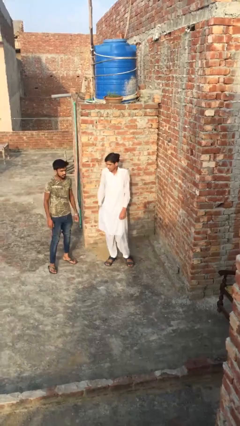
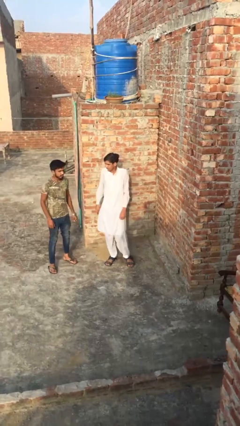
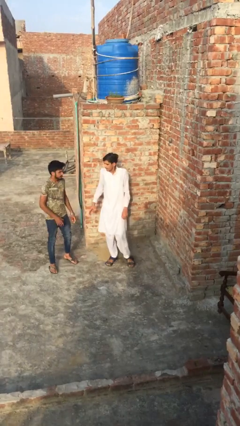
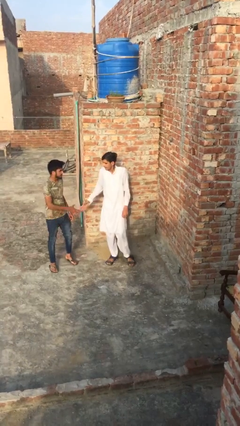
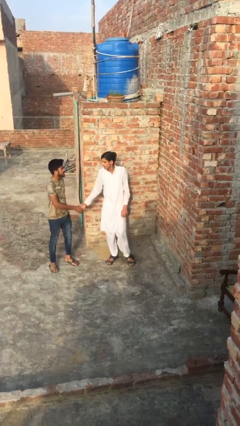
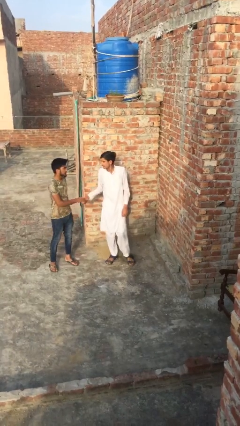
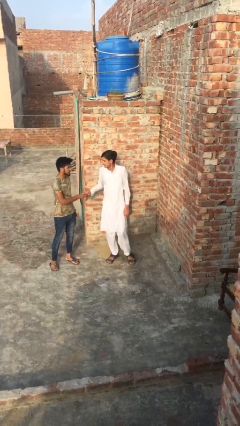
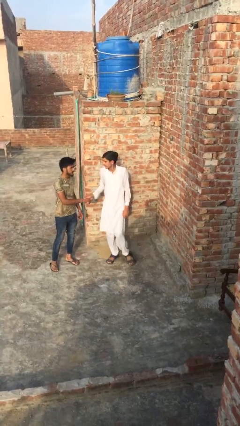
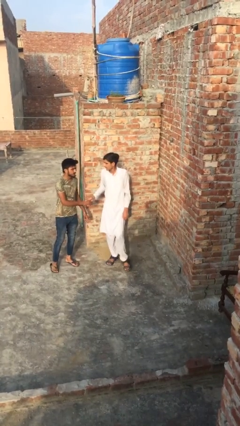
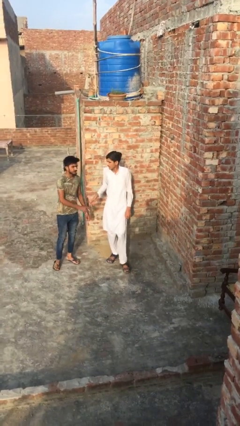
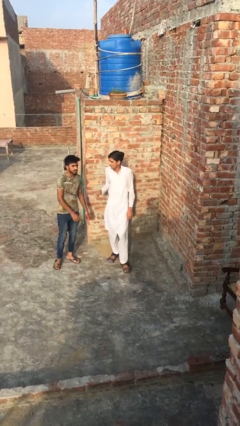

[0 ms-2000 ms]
person shakes hand

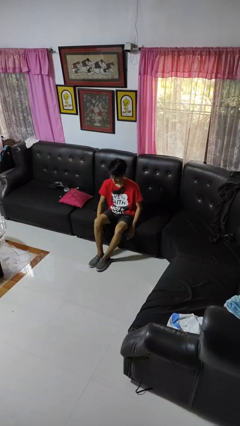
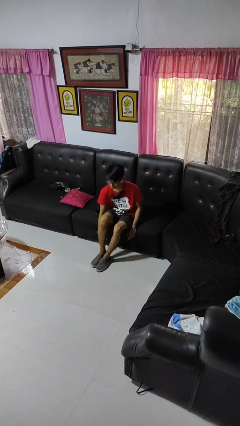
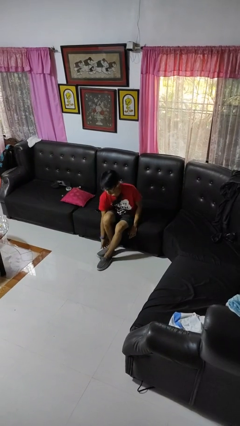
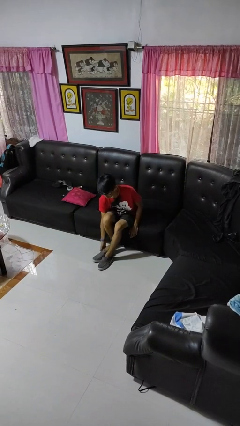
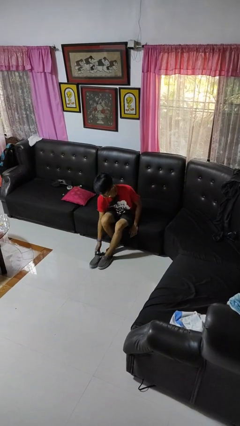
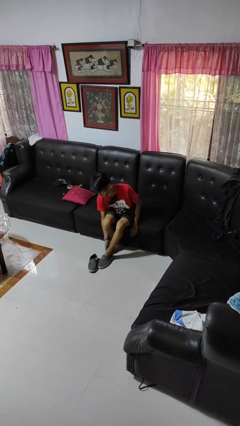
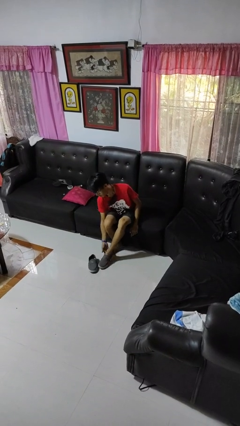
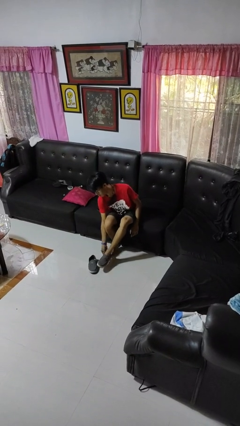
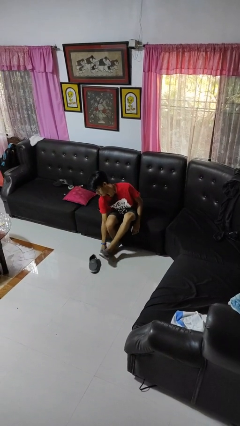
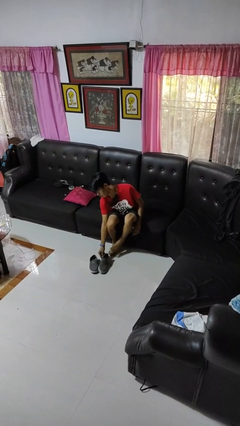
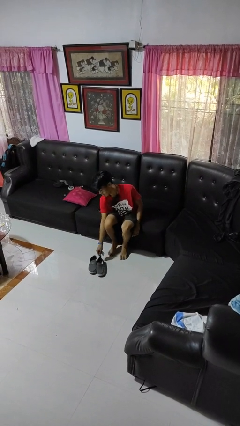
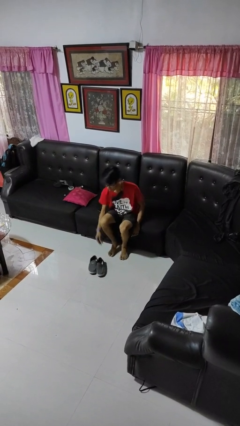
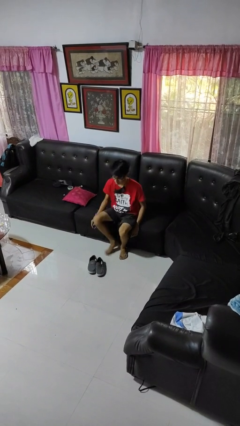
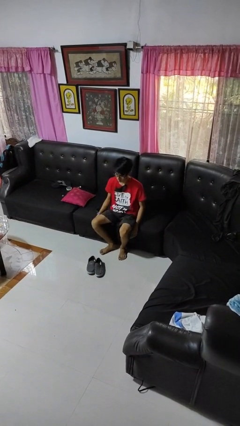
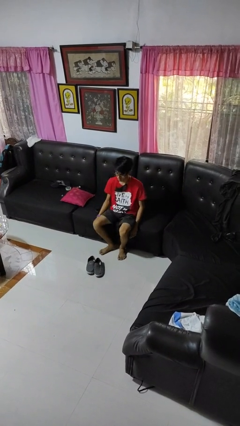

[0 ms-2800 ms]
person takes off shoes

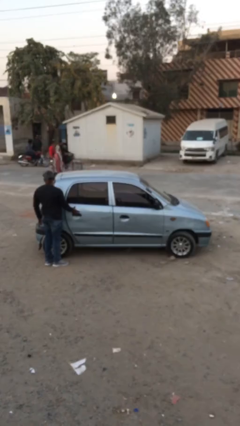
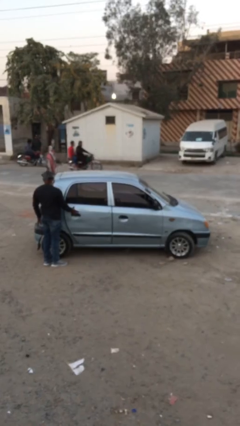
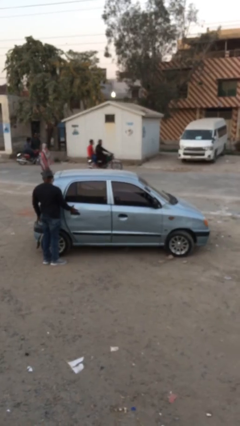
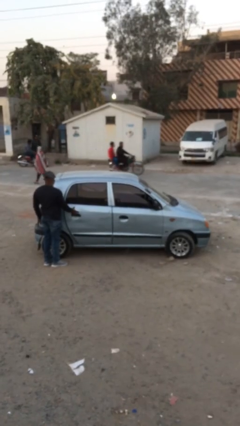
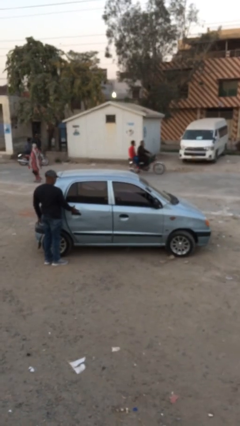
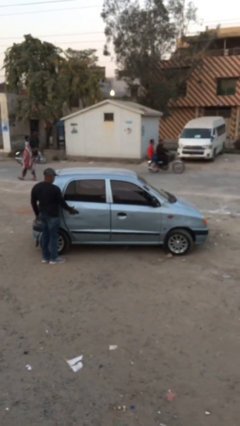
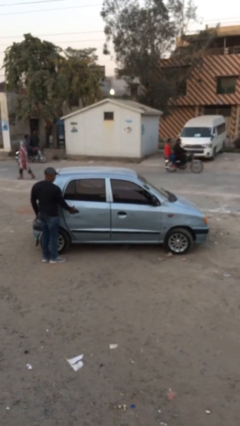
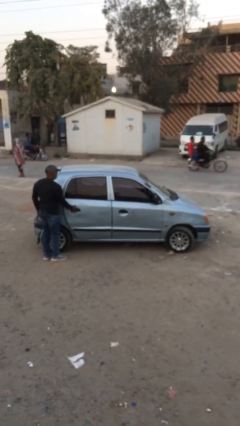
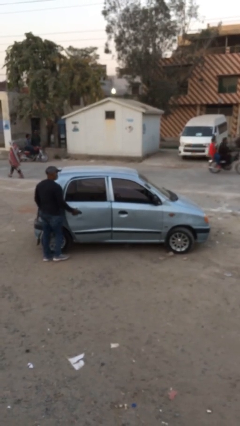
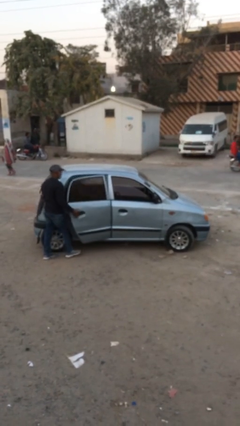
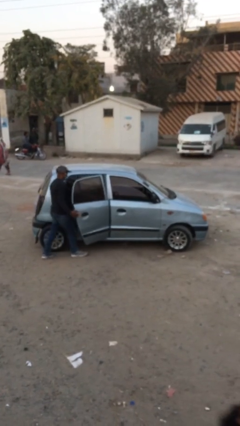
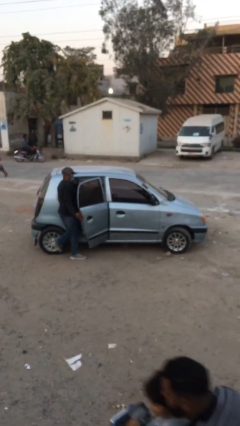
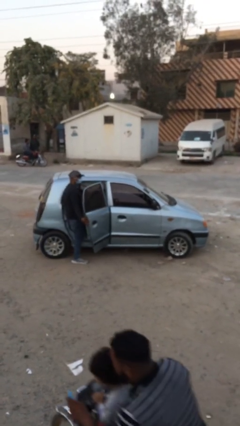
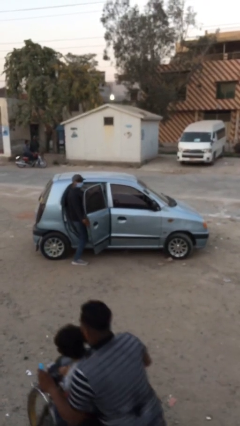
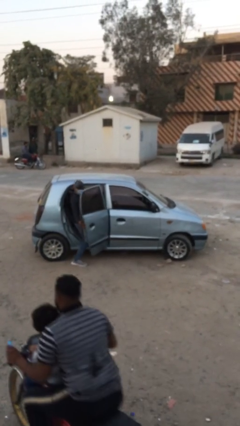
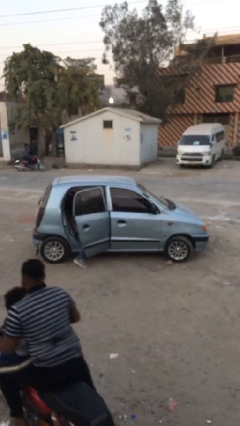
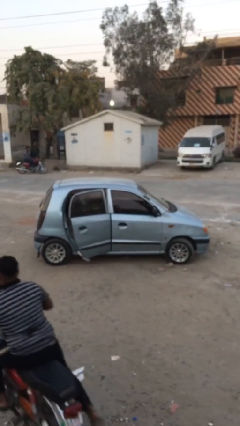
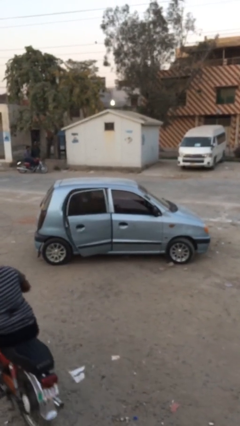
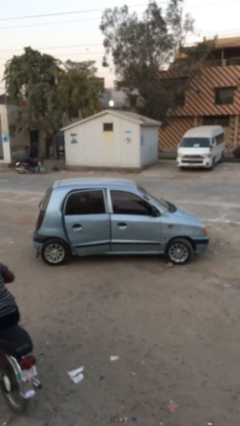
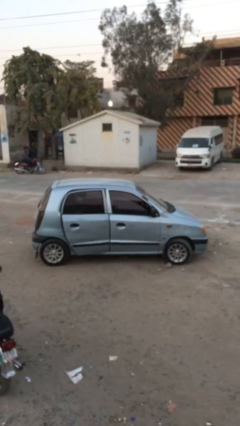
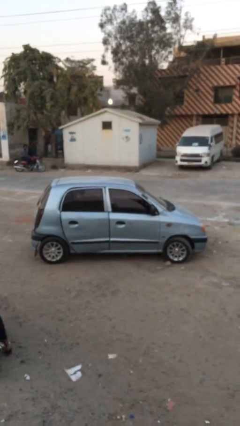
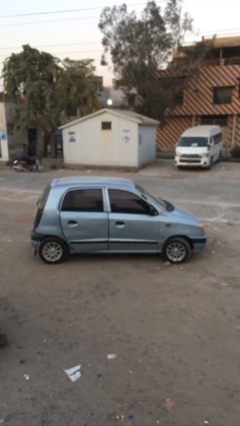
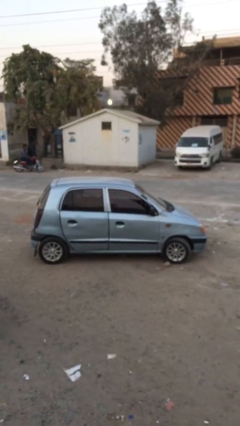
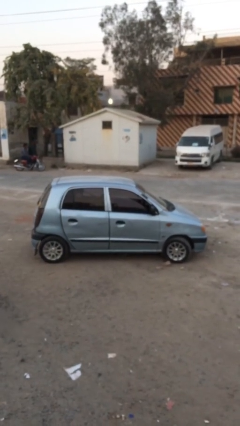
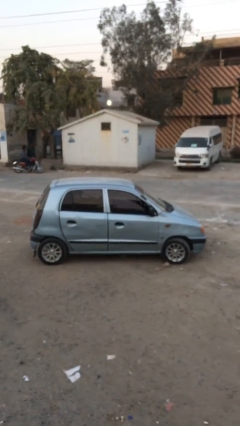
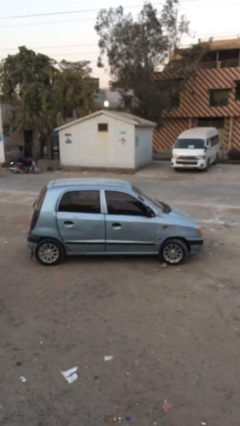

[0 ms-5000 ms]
car picks up person

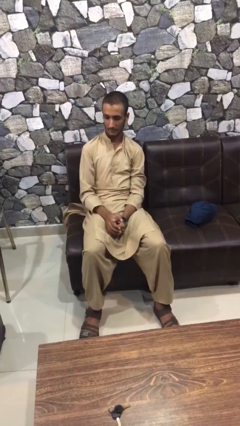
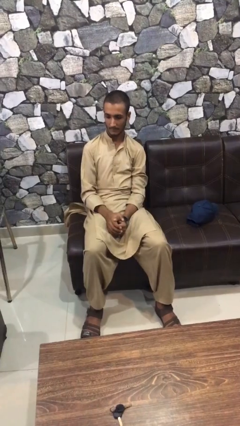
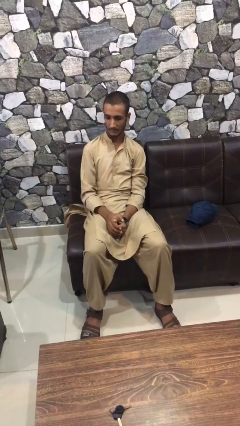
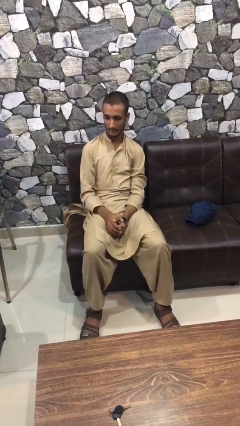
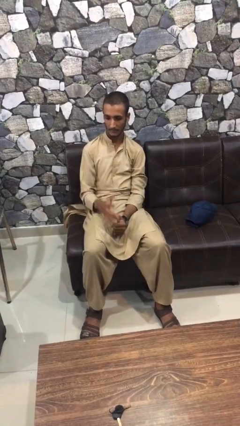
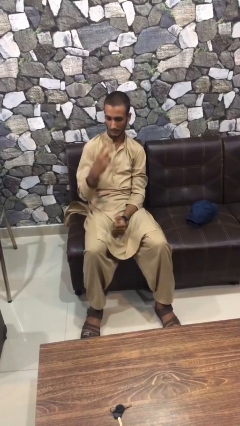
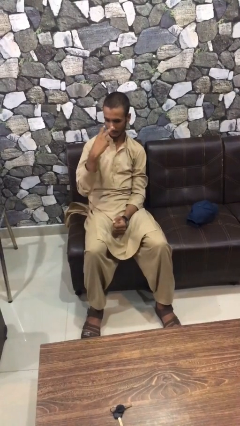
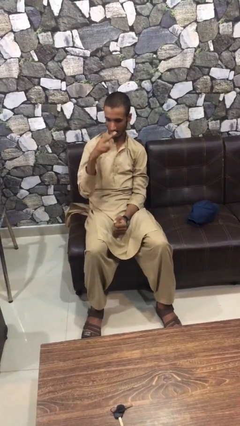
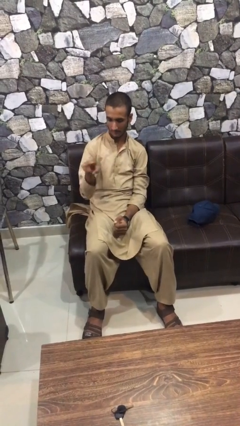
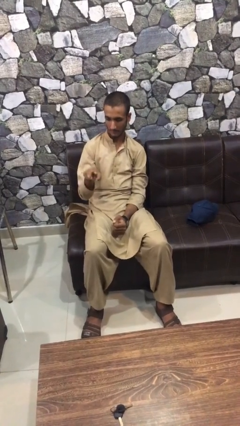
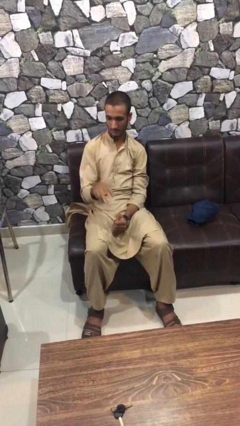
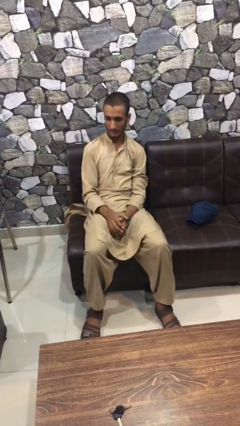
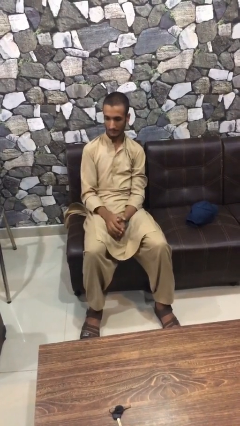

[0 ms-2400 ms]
person gestures watch closely

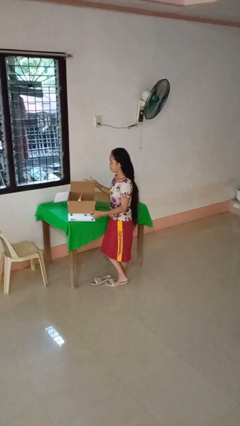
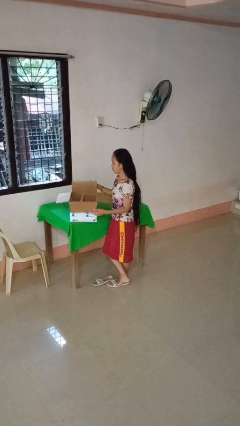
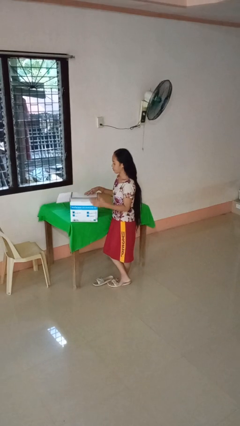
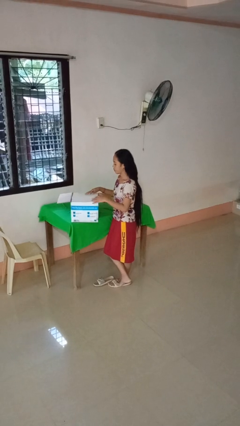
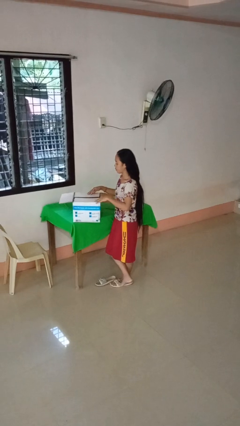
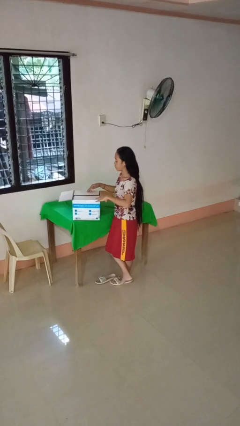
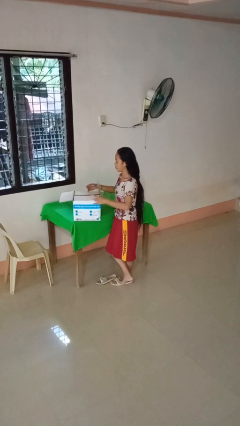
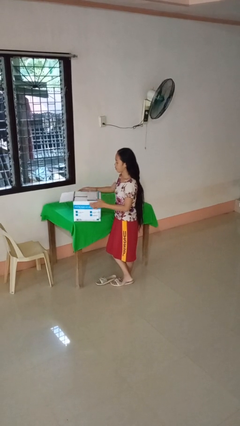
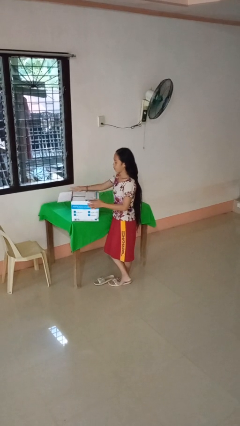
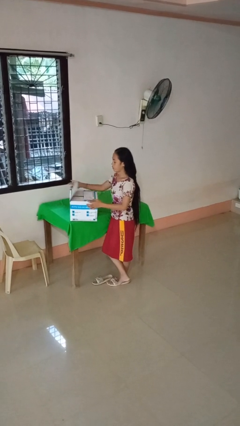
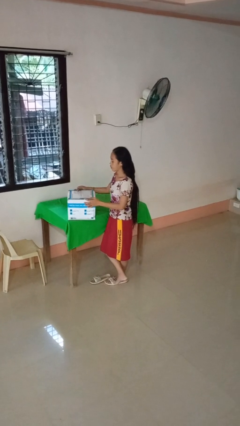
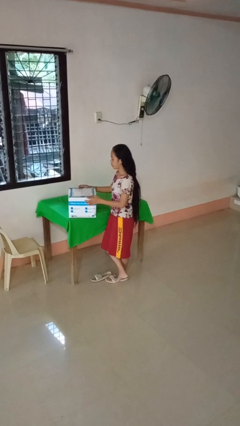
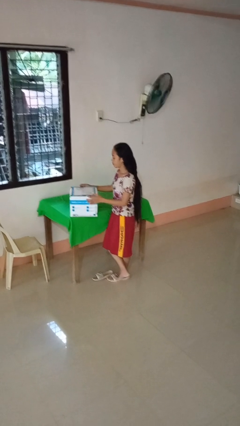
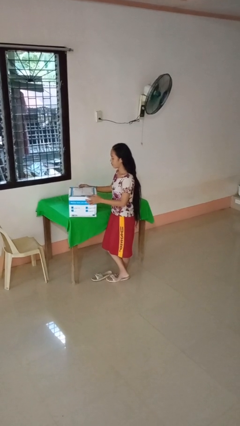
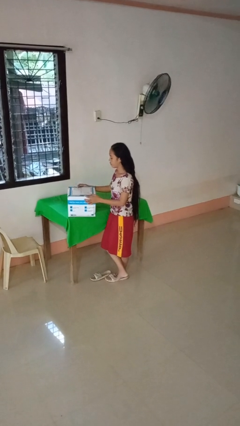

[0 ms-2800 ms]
person closes box

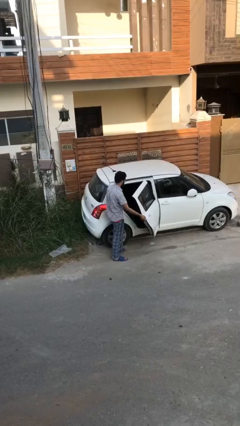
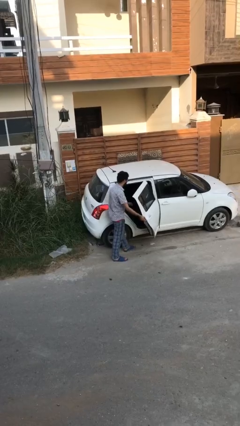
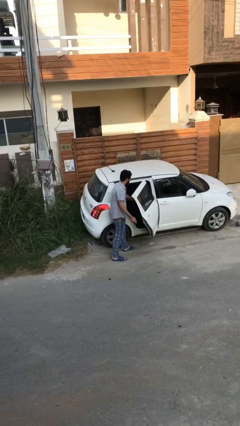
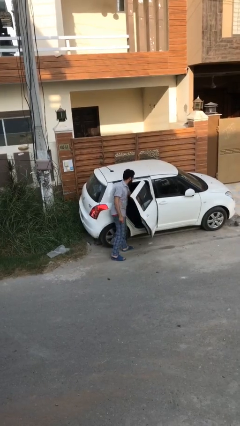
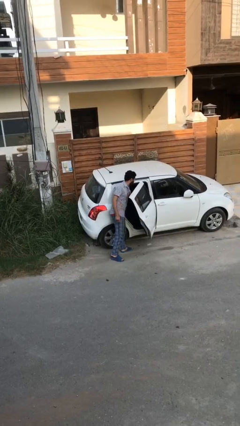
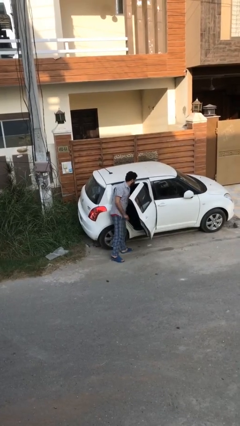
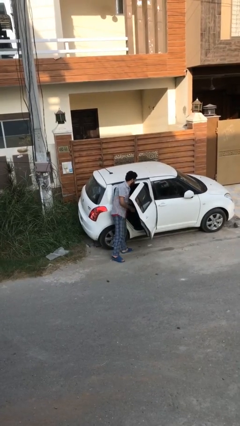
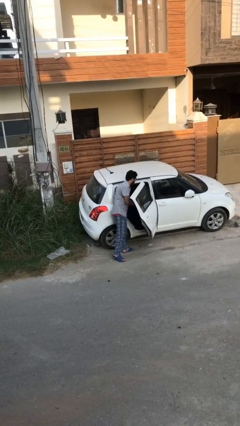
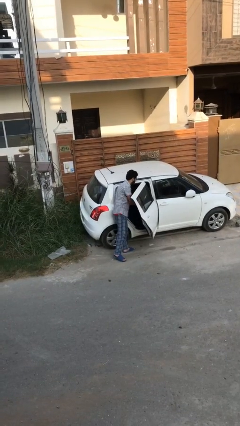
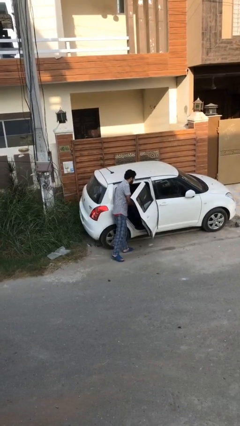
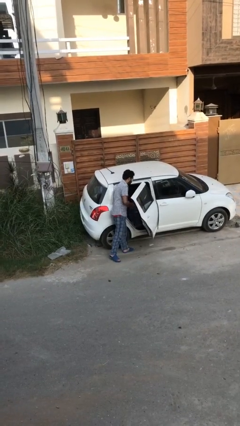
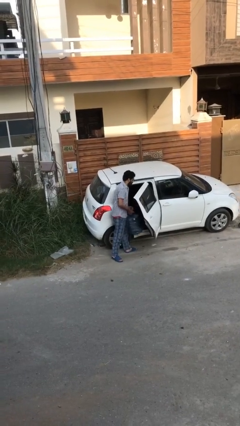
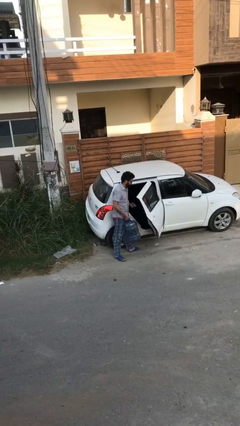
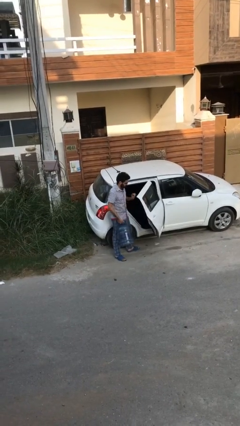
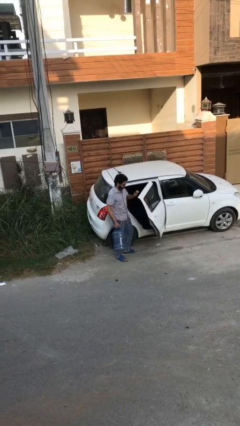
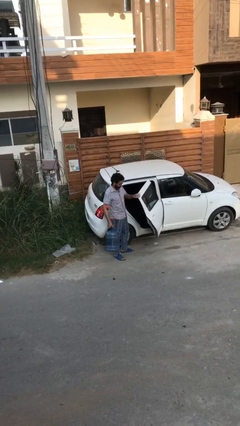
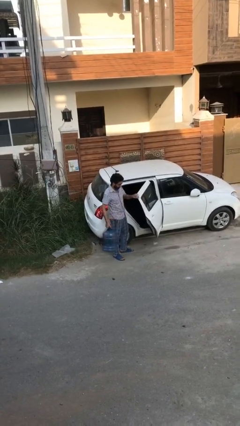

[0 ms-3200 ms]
person unloads car
